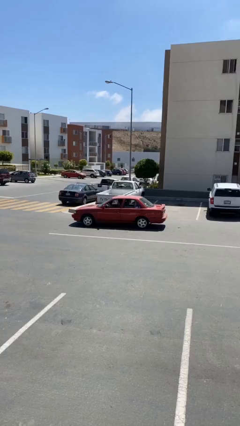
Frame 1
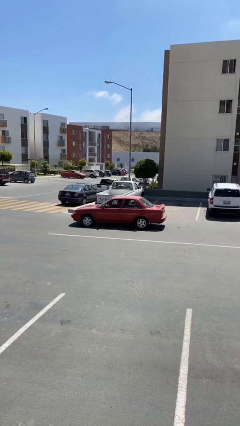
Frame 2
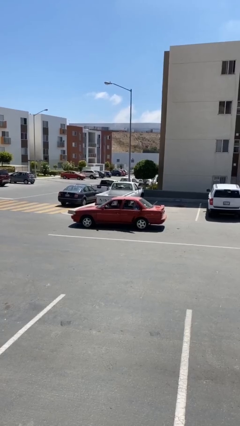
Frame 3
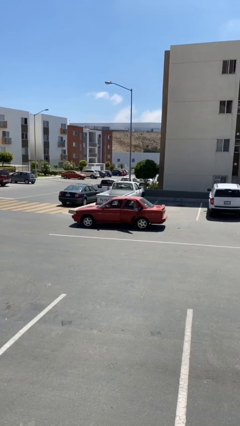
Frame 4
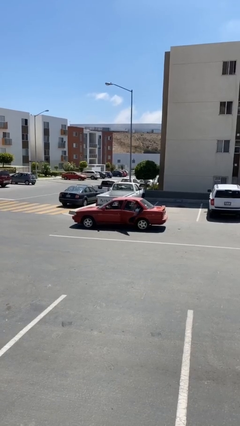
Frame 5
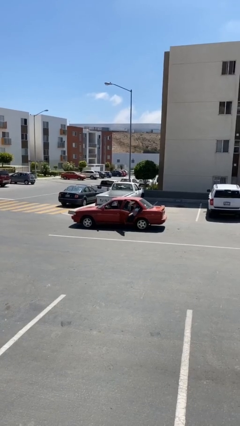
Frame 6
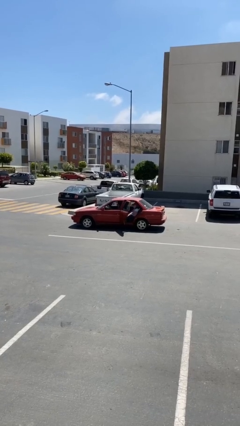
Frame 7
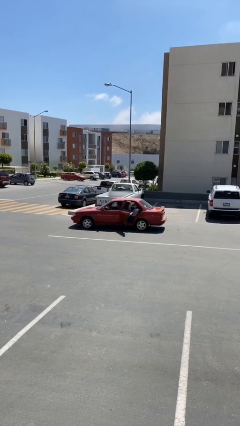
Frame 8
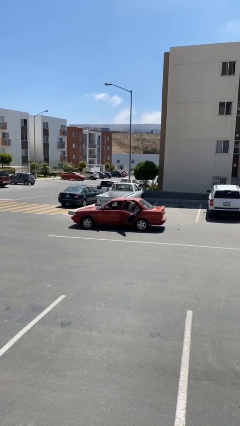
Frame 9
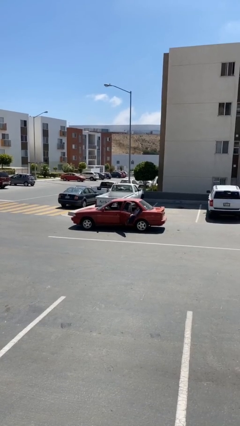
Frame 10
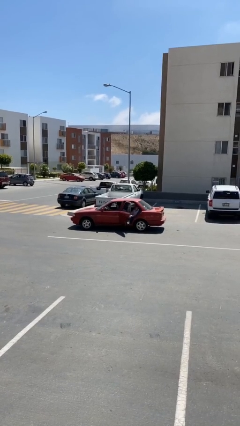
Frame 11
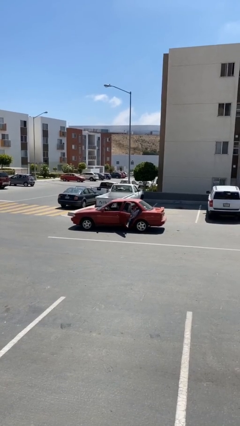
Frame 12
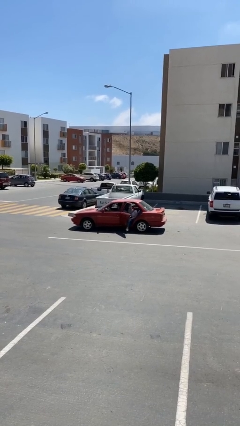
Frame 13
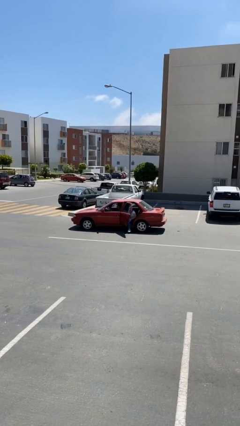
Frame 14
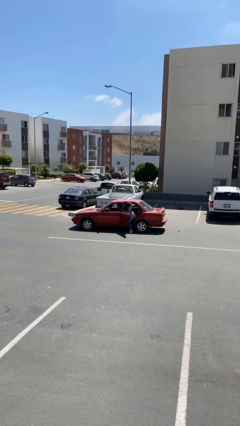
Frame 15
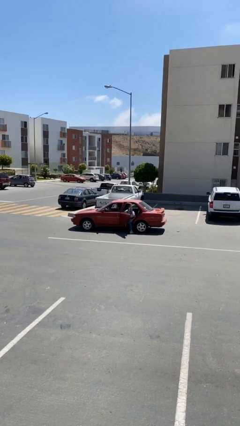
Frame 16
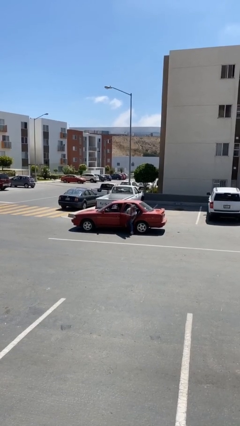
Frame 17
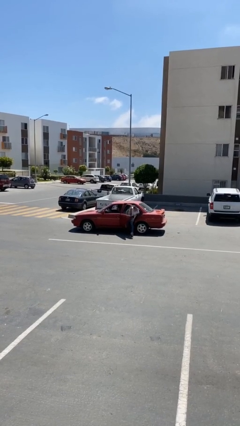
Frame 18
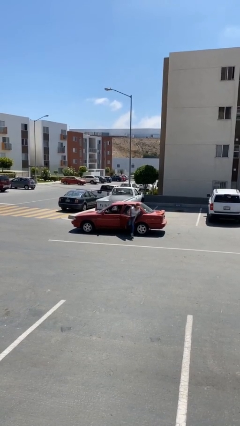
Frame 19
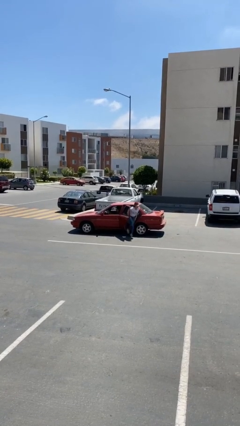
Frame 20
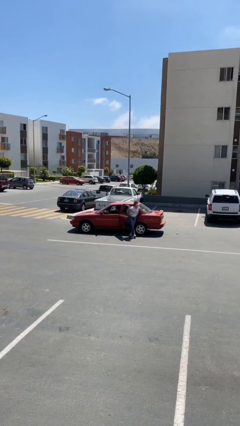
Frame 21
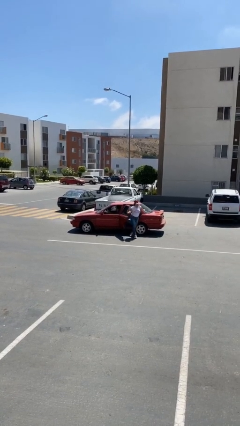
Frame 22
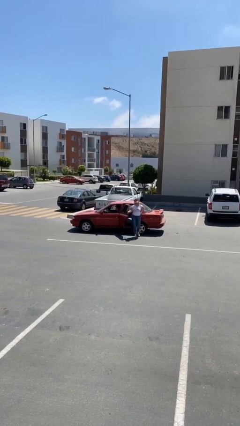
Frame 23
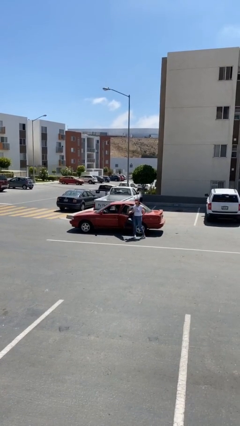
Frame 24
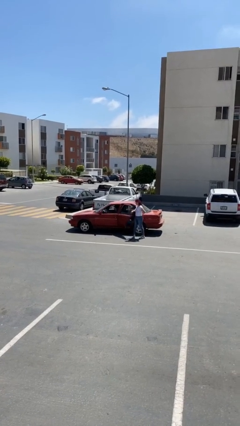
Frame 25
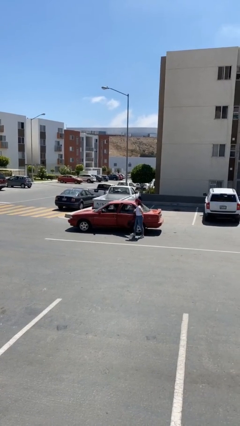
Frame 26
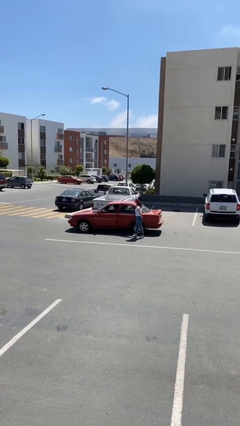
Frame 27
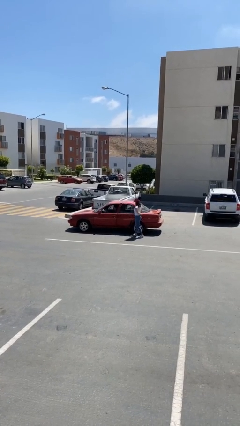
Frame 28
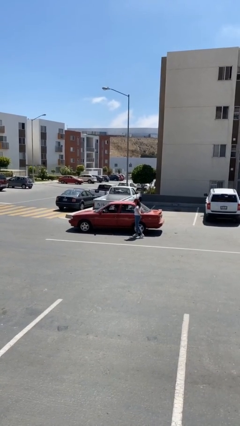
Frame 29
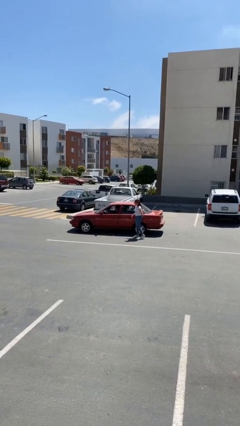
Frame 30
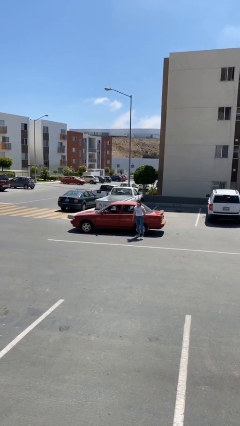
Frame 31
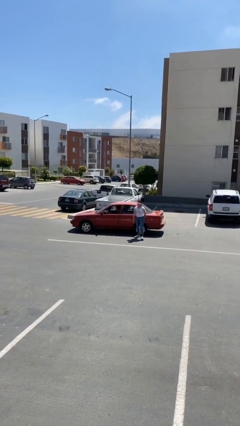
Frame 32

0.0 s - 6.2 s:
car drops off person

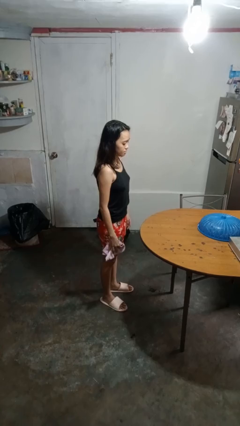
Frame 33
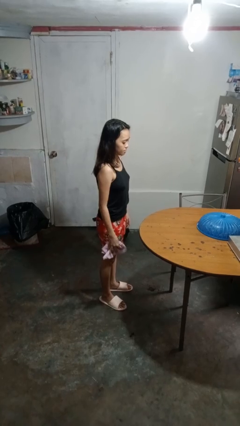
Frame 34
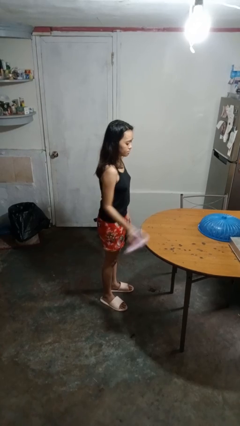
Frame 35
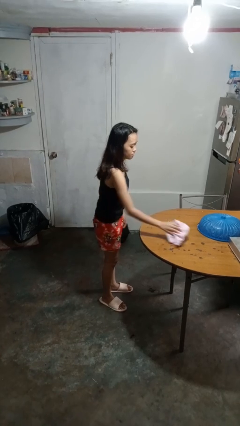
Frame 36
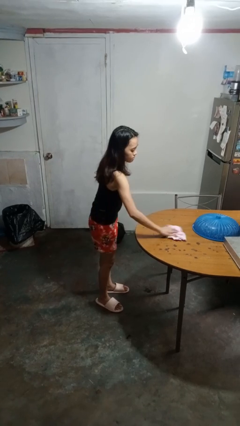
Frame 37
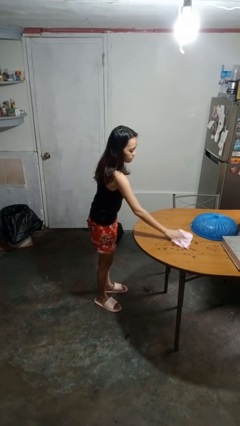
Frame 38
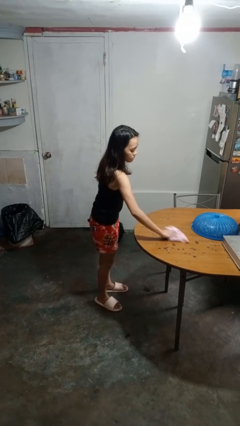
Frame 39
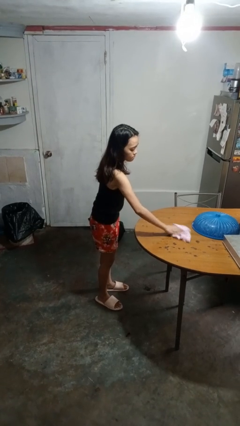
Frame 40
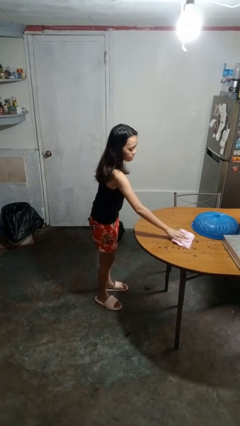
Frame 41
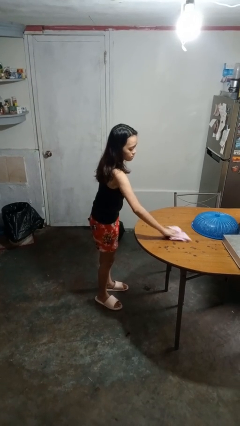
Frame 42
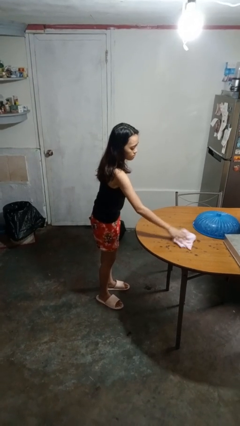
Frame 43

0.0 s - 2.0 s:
person cleans table with rag

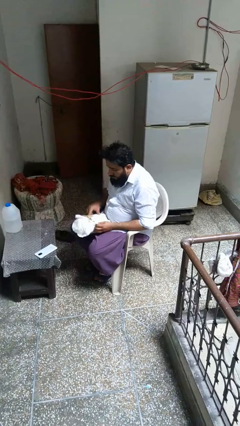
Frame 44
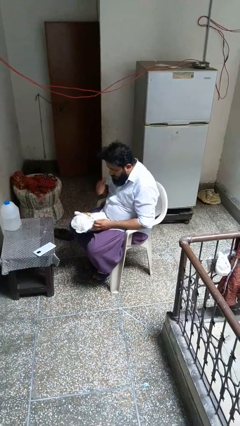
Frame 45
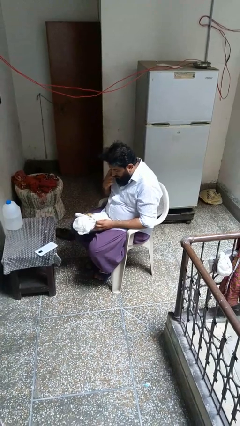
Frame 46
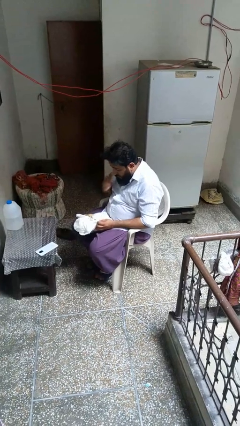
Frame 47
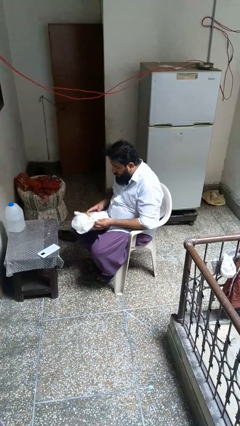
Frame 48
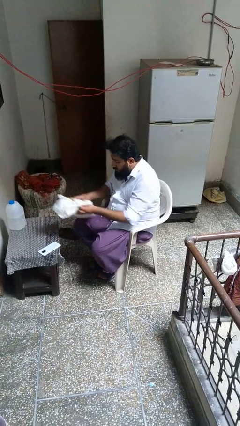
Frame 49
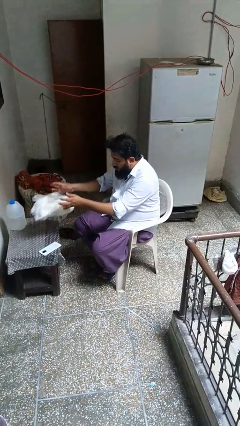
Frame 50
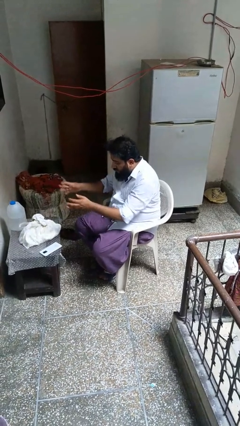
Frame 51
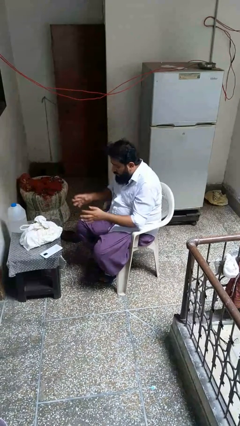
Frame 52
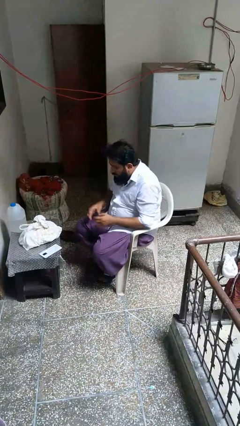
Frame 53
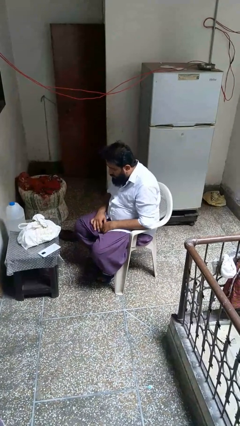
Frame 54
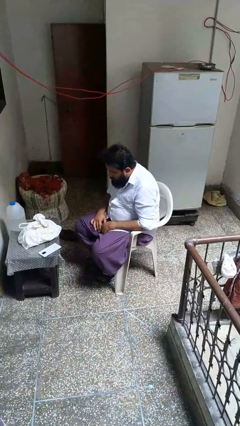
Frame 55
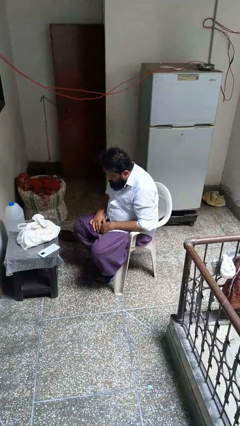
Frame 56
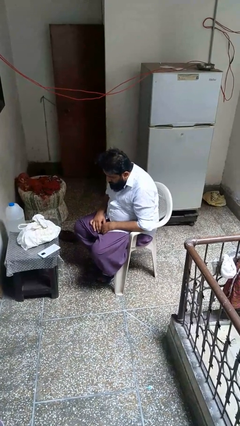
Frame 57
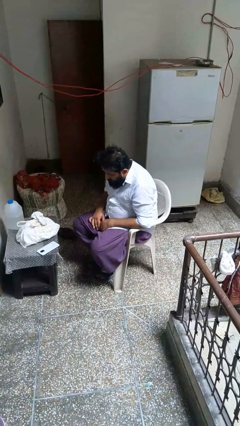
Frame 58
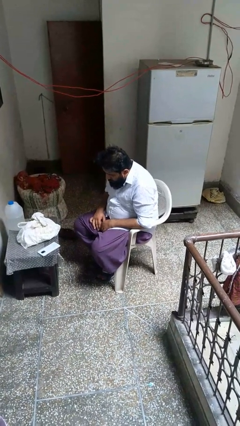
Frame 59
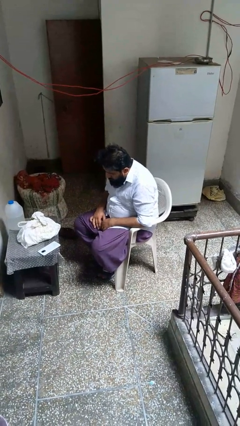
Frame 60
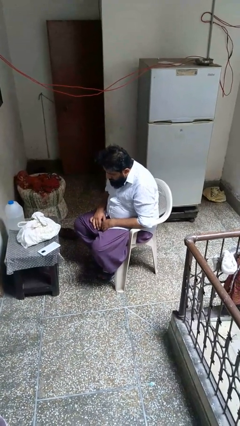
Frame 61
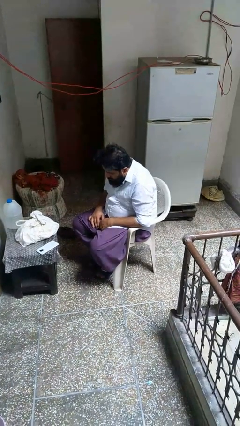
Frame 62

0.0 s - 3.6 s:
person throws object on table

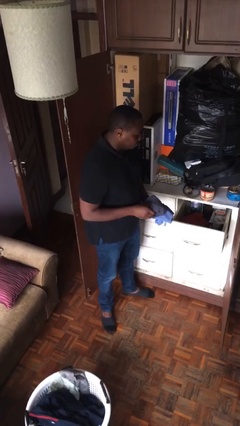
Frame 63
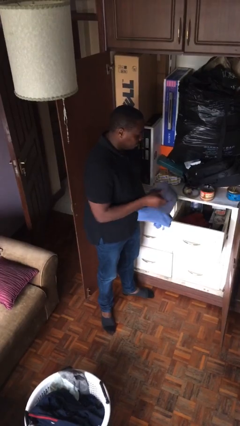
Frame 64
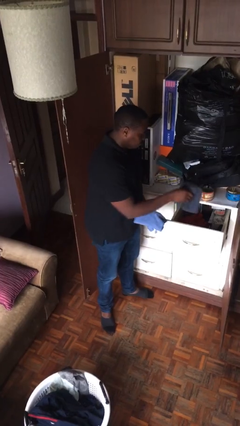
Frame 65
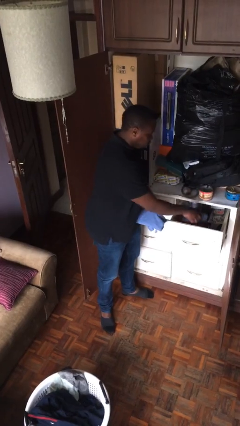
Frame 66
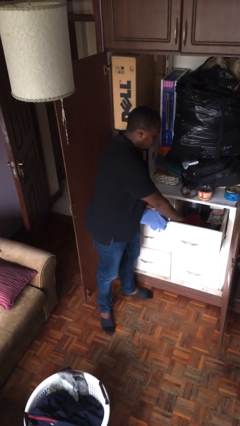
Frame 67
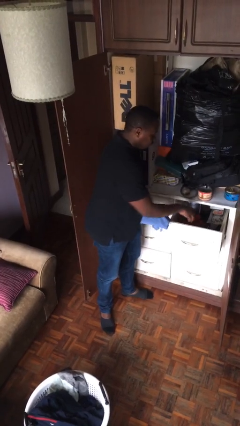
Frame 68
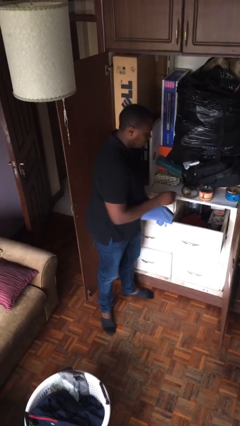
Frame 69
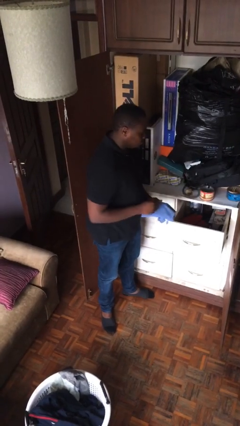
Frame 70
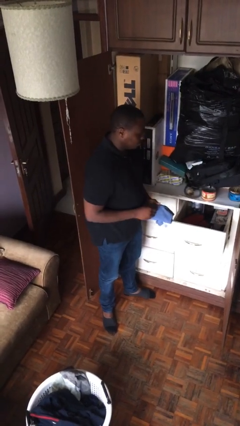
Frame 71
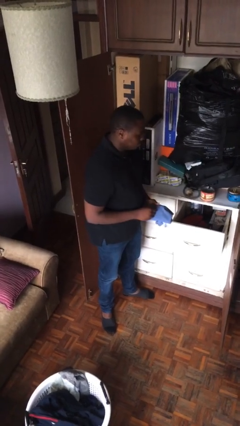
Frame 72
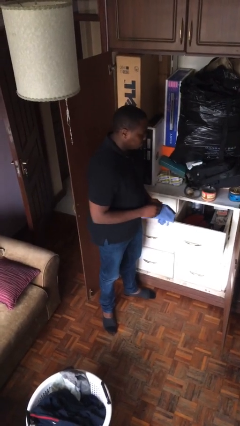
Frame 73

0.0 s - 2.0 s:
person puts clothes into dresser

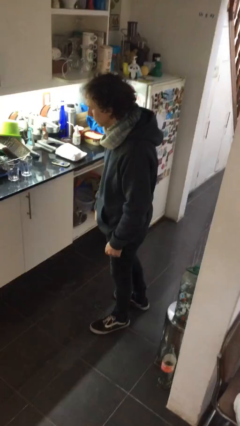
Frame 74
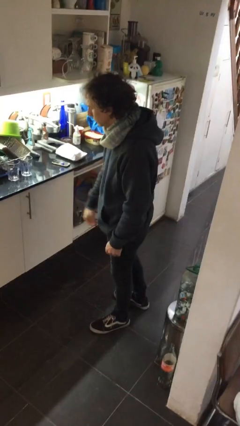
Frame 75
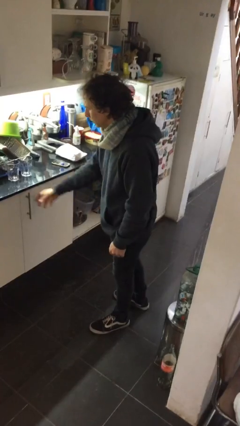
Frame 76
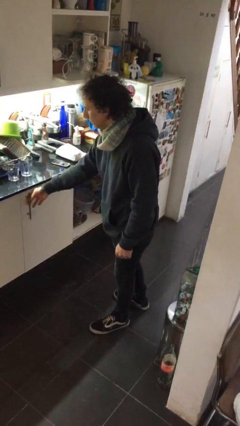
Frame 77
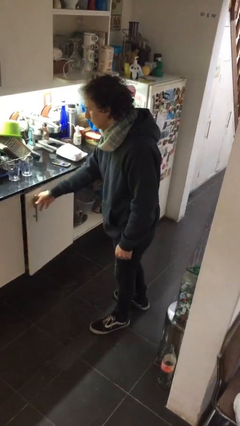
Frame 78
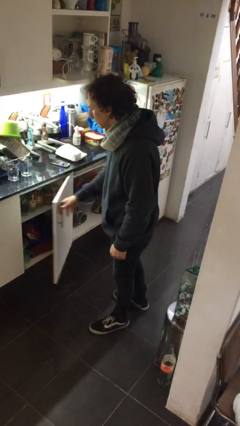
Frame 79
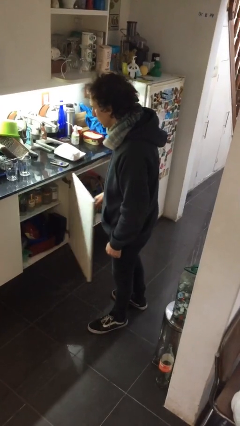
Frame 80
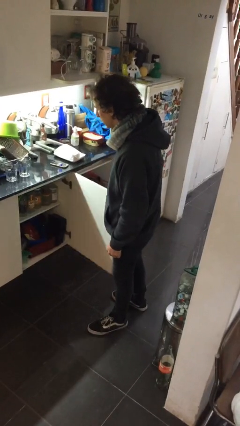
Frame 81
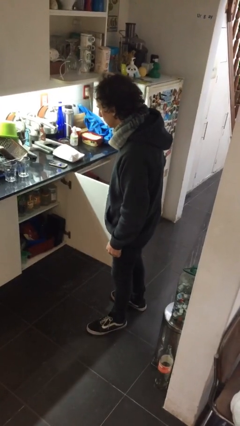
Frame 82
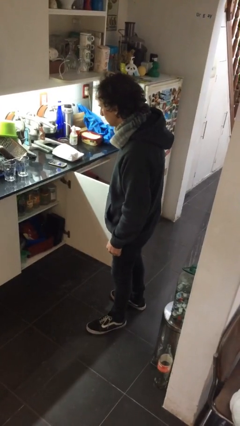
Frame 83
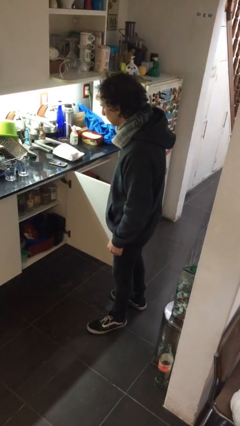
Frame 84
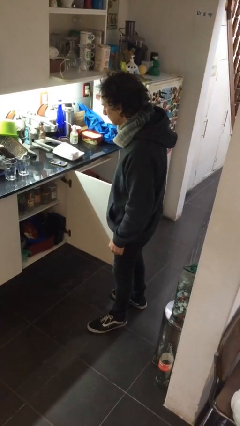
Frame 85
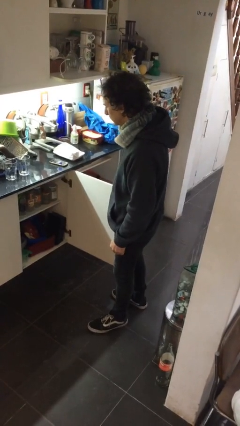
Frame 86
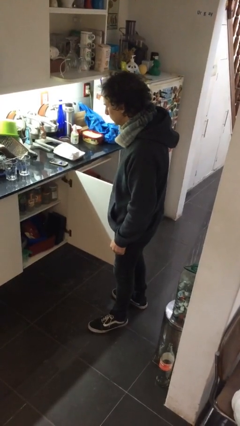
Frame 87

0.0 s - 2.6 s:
person closes cabinet

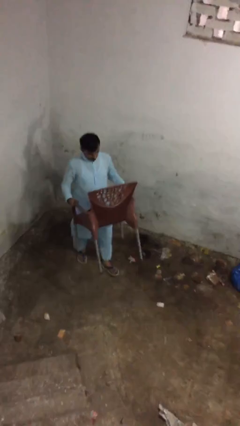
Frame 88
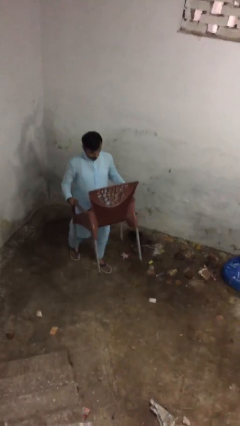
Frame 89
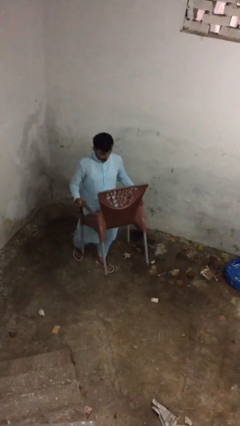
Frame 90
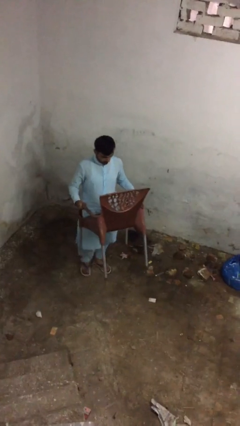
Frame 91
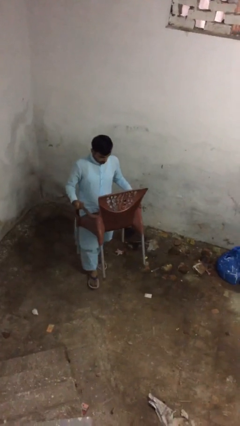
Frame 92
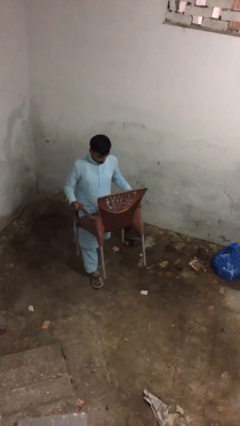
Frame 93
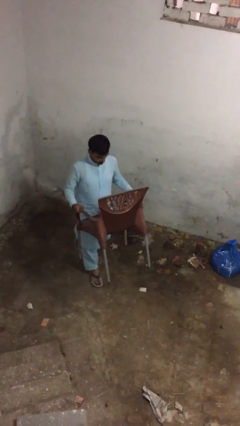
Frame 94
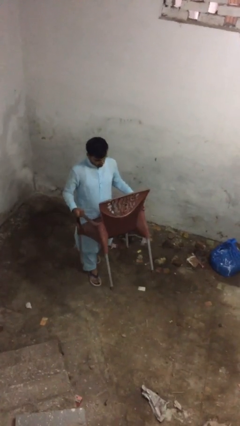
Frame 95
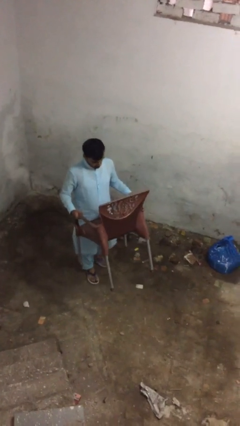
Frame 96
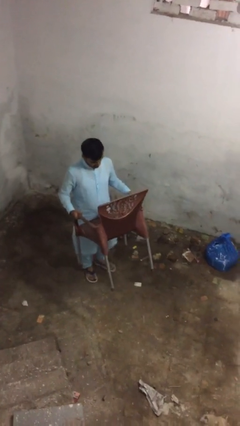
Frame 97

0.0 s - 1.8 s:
person carries heavy object
